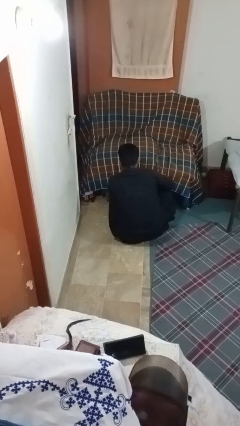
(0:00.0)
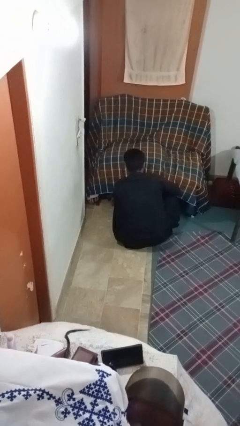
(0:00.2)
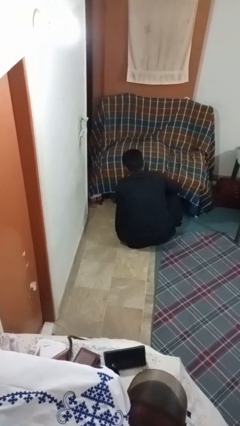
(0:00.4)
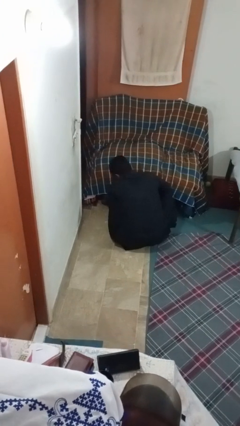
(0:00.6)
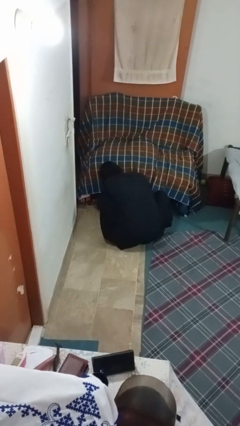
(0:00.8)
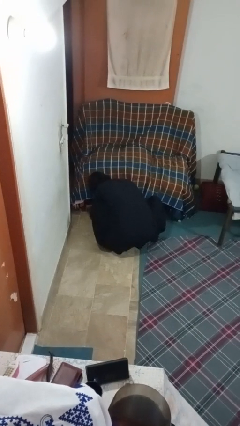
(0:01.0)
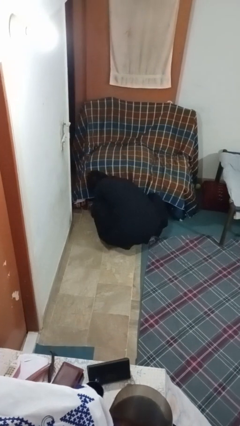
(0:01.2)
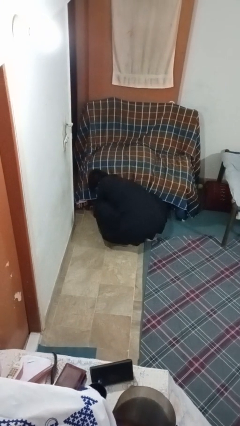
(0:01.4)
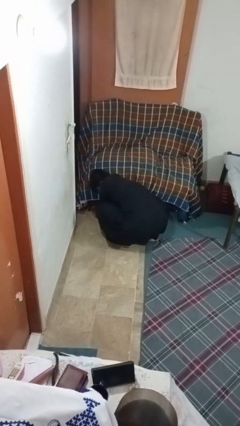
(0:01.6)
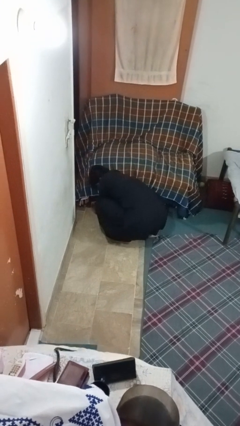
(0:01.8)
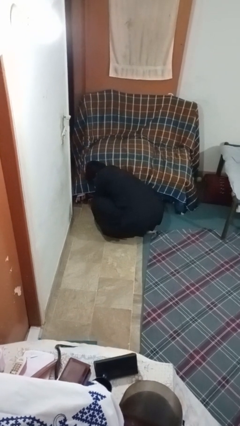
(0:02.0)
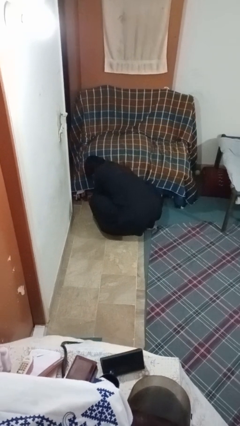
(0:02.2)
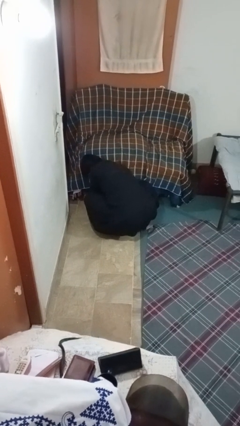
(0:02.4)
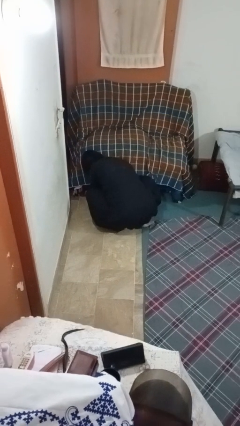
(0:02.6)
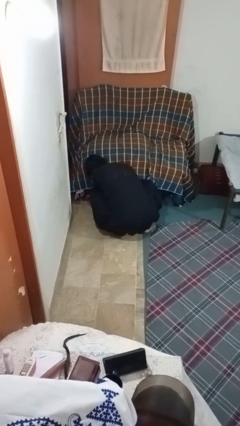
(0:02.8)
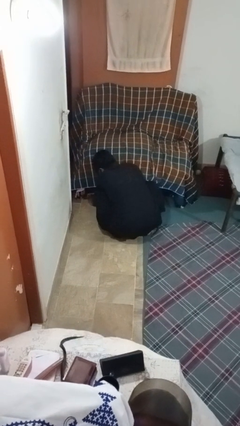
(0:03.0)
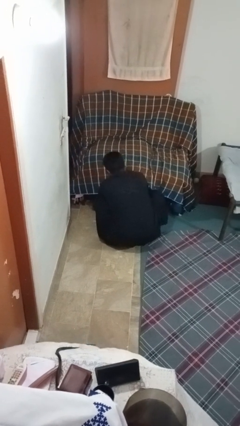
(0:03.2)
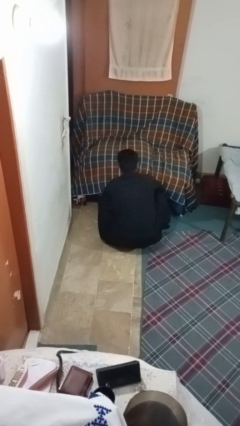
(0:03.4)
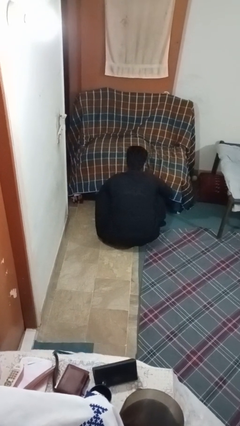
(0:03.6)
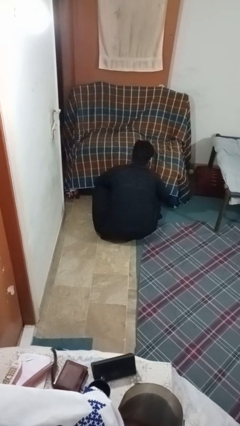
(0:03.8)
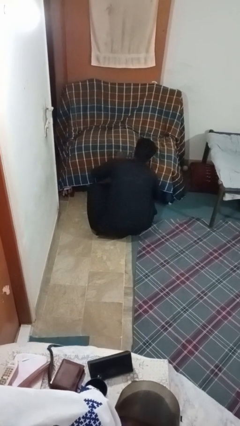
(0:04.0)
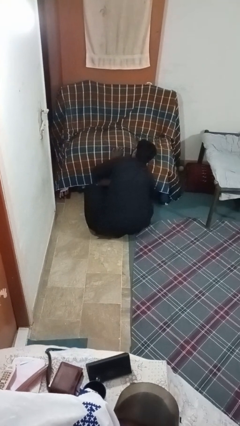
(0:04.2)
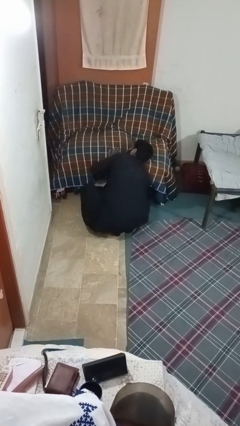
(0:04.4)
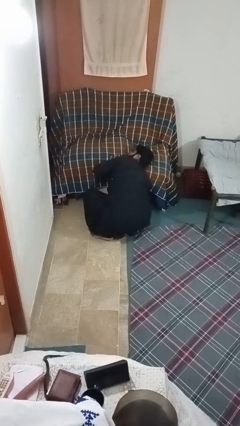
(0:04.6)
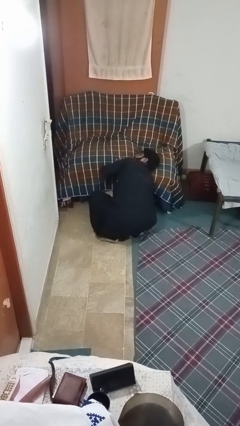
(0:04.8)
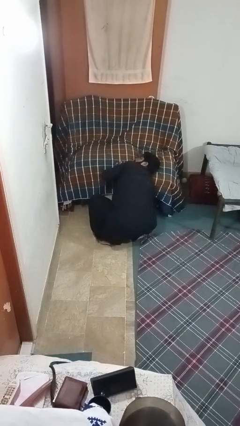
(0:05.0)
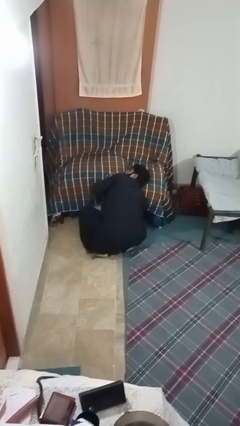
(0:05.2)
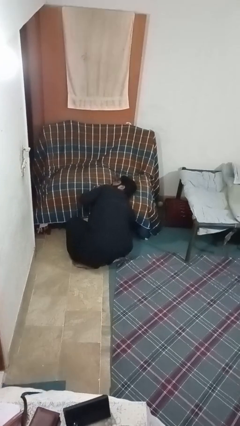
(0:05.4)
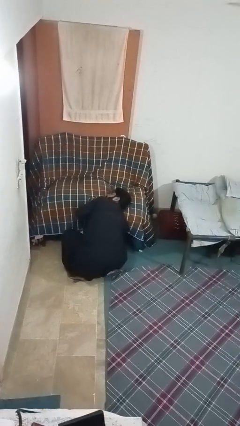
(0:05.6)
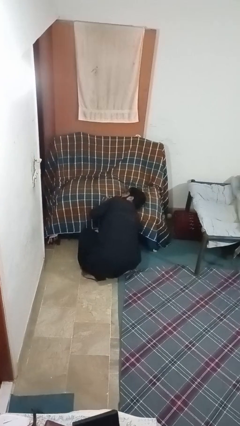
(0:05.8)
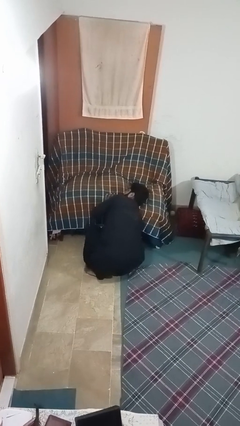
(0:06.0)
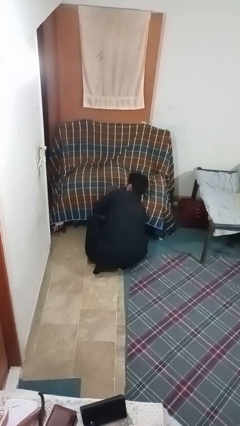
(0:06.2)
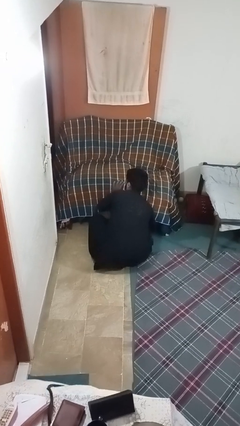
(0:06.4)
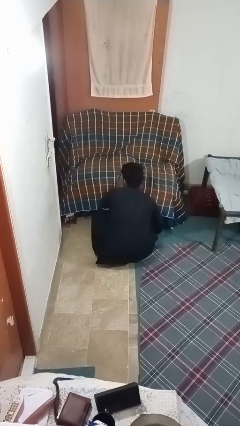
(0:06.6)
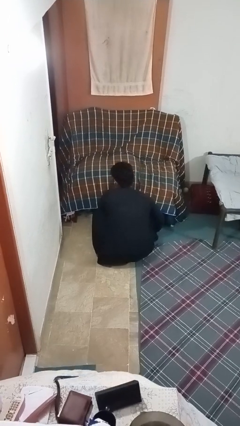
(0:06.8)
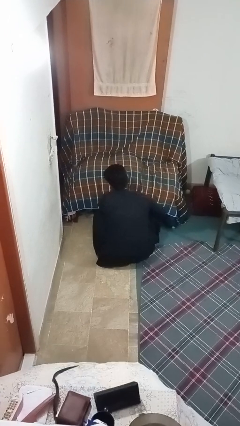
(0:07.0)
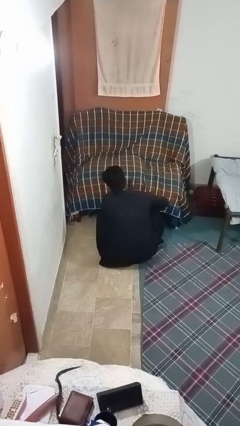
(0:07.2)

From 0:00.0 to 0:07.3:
person searches under couch

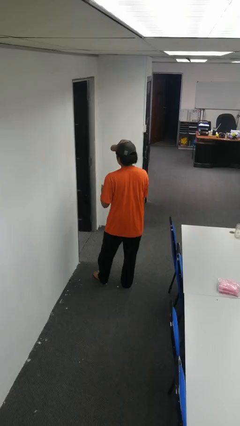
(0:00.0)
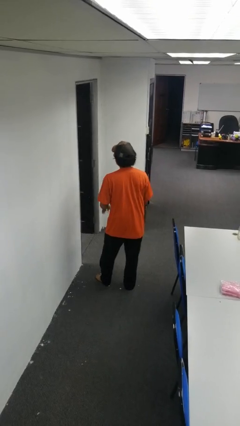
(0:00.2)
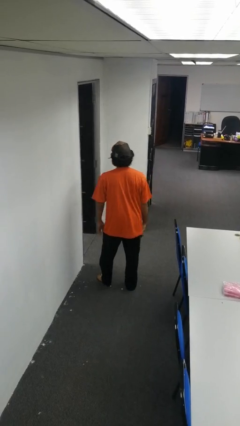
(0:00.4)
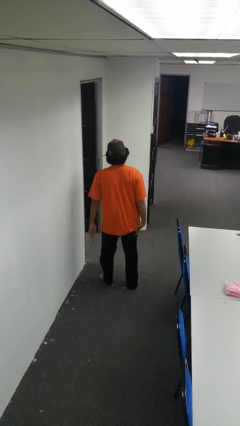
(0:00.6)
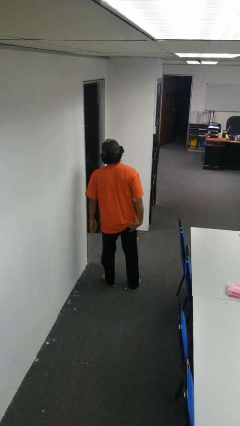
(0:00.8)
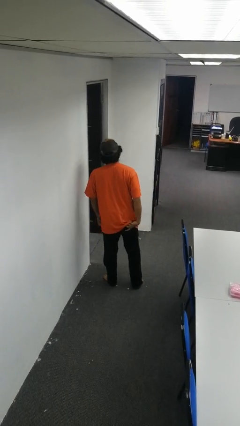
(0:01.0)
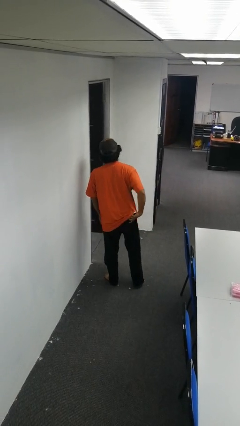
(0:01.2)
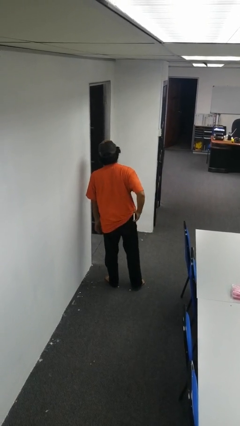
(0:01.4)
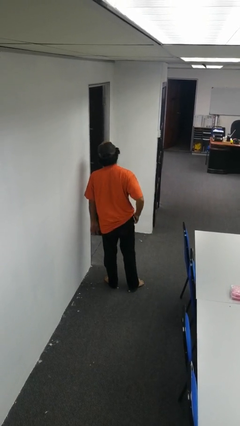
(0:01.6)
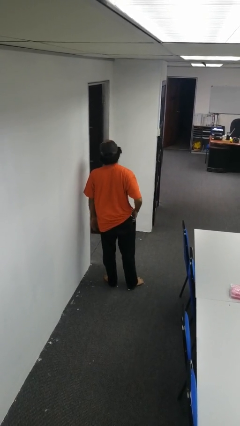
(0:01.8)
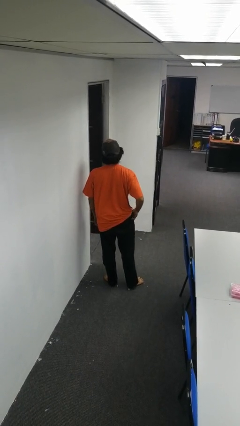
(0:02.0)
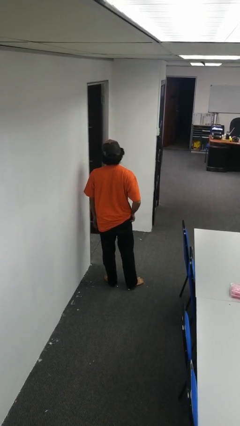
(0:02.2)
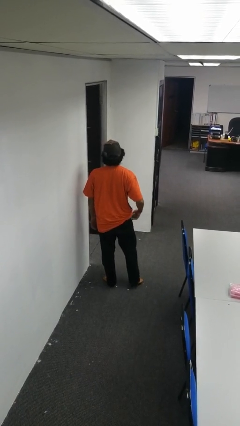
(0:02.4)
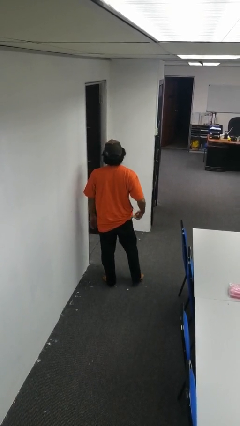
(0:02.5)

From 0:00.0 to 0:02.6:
person puts phone into pocket

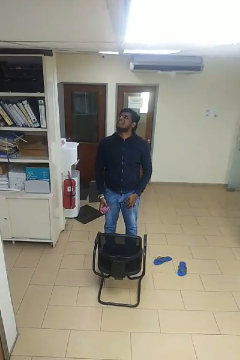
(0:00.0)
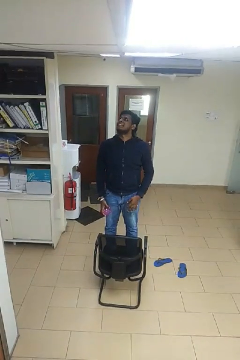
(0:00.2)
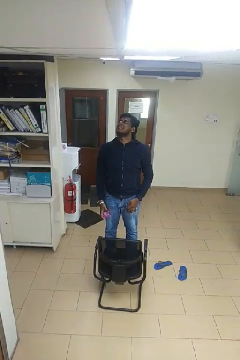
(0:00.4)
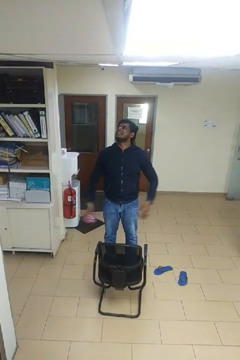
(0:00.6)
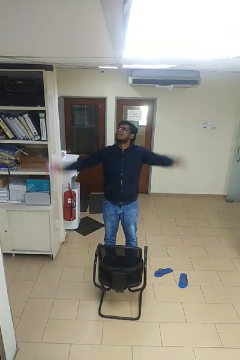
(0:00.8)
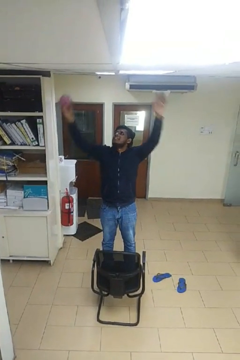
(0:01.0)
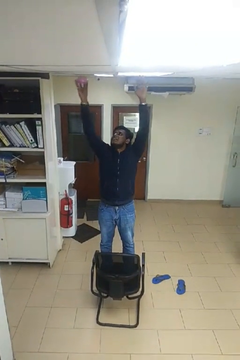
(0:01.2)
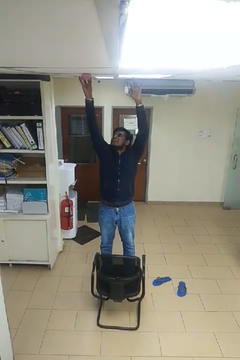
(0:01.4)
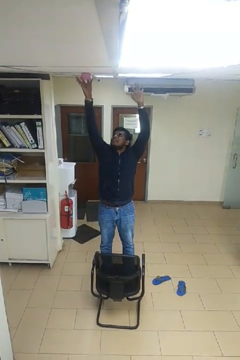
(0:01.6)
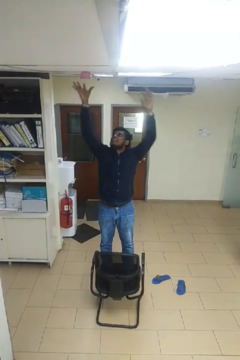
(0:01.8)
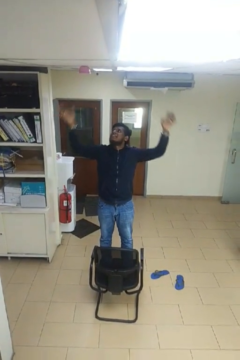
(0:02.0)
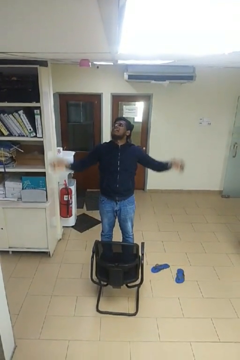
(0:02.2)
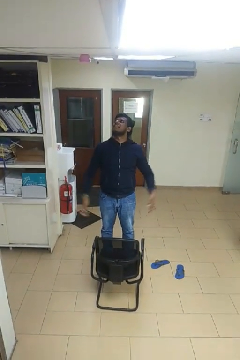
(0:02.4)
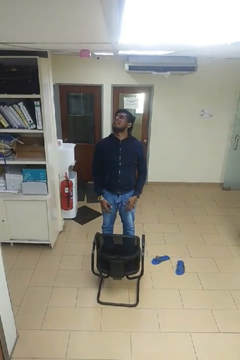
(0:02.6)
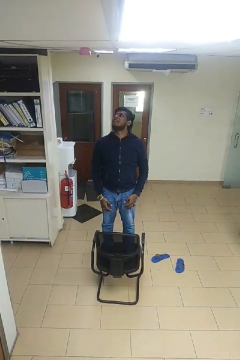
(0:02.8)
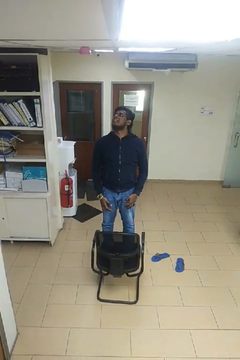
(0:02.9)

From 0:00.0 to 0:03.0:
person puts up smoke detector

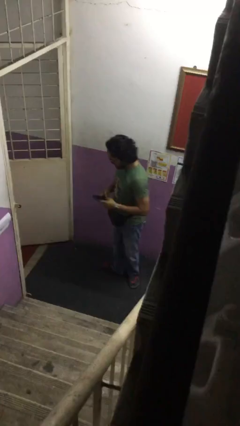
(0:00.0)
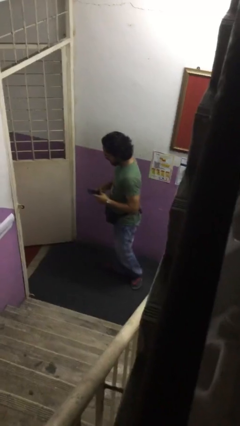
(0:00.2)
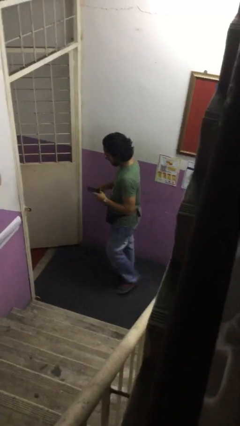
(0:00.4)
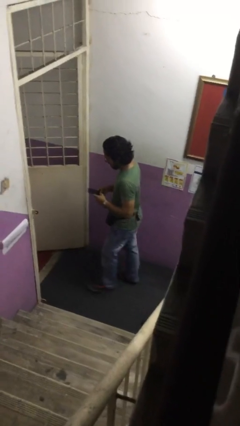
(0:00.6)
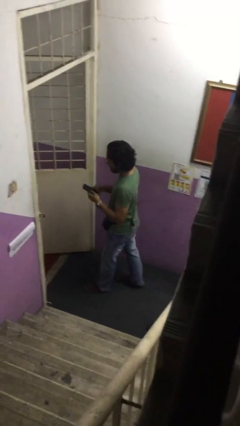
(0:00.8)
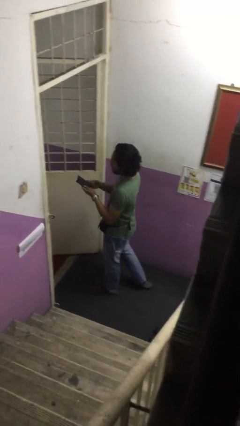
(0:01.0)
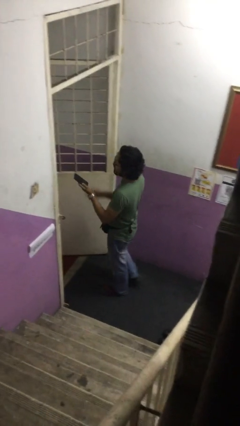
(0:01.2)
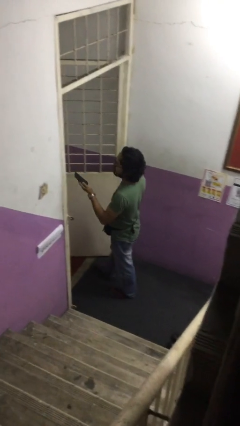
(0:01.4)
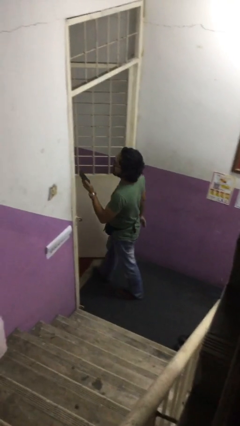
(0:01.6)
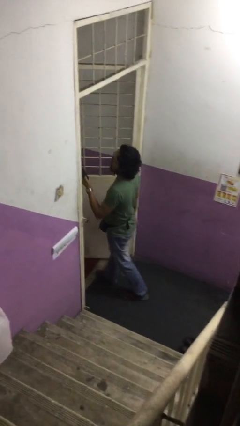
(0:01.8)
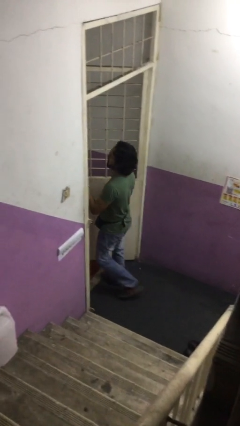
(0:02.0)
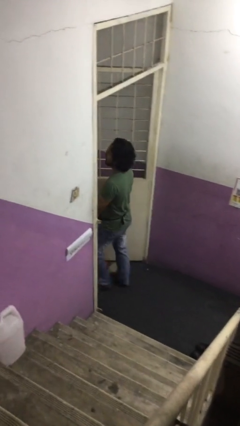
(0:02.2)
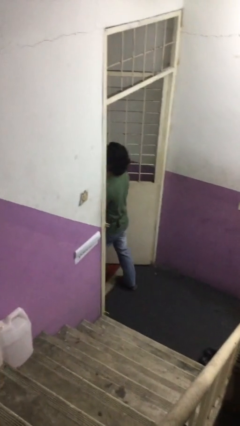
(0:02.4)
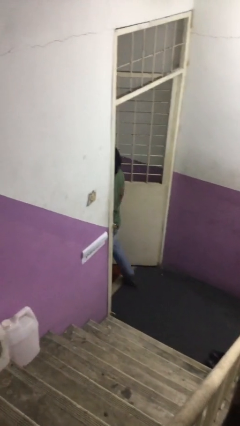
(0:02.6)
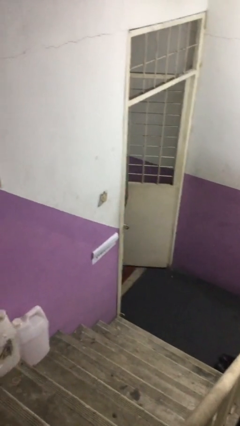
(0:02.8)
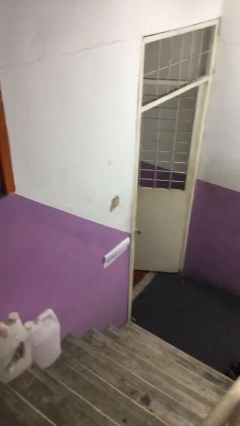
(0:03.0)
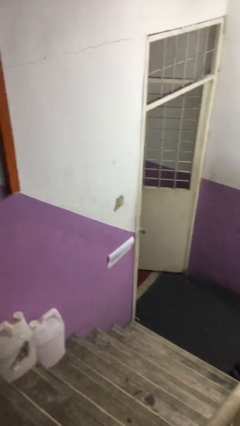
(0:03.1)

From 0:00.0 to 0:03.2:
person exits scene through structure

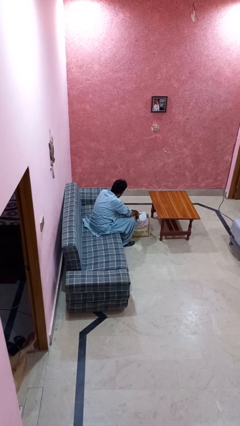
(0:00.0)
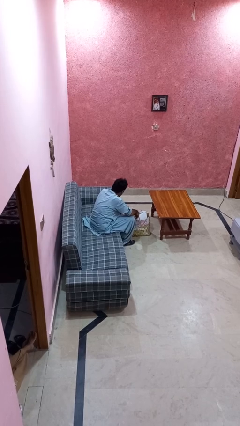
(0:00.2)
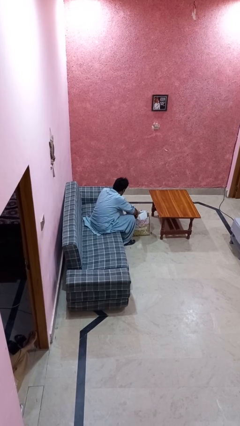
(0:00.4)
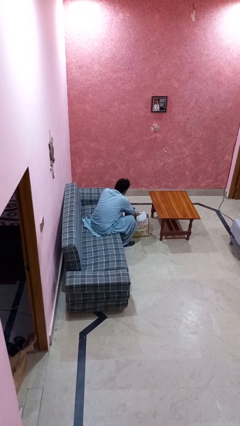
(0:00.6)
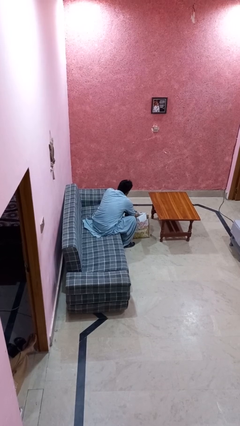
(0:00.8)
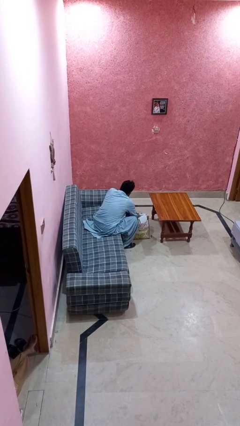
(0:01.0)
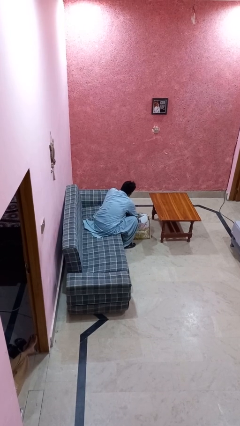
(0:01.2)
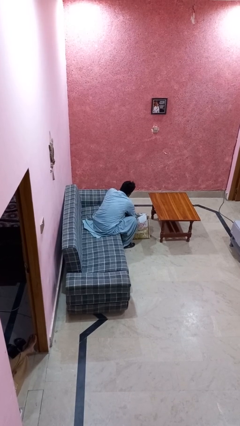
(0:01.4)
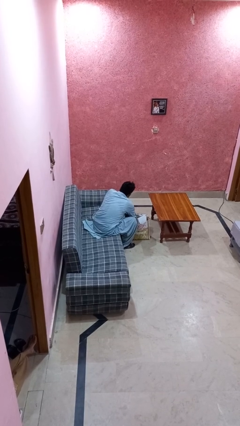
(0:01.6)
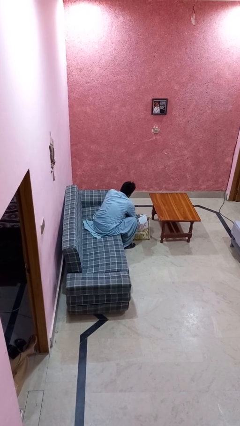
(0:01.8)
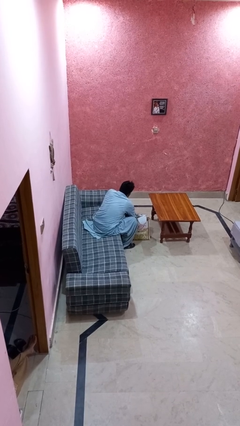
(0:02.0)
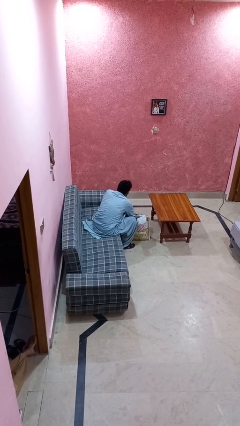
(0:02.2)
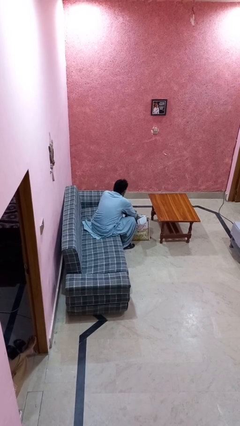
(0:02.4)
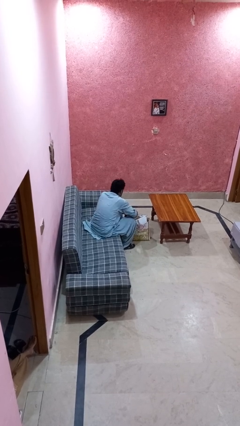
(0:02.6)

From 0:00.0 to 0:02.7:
person searches in bag
